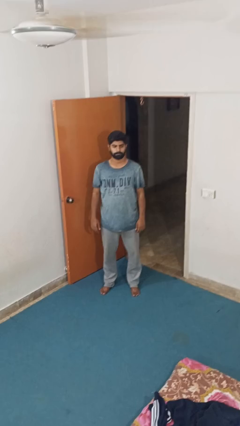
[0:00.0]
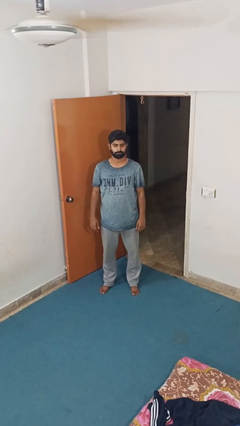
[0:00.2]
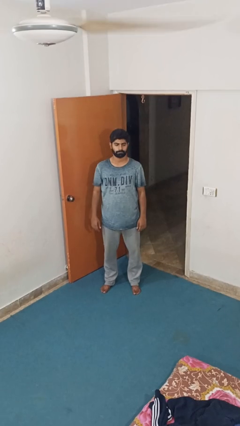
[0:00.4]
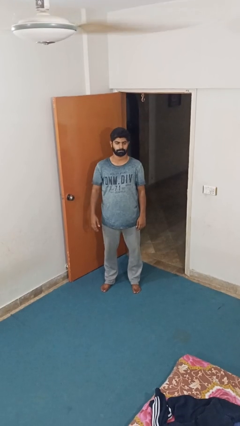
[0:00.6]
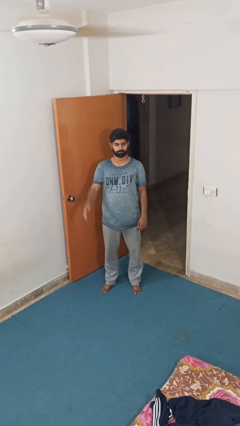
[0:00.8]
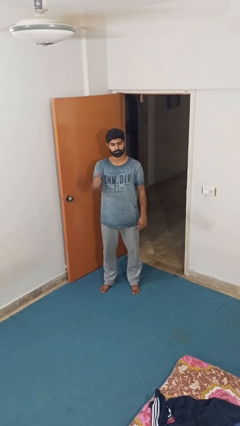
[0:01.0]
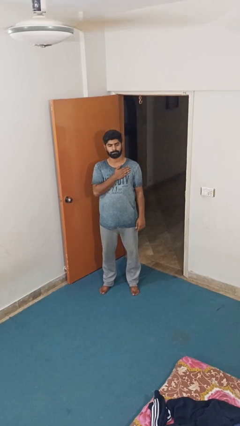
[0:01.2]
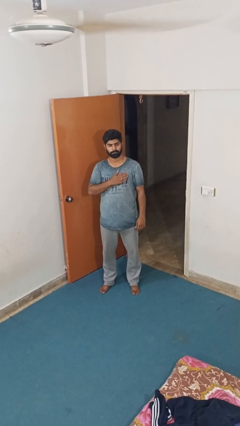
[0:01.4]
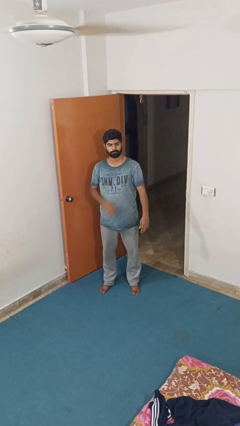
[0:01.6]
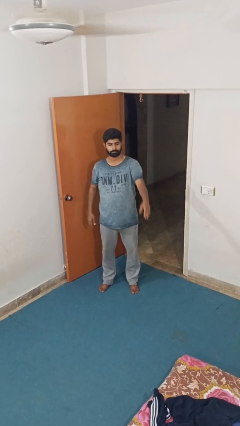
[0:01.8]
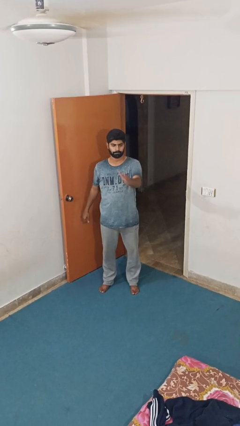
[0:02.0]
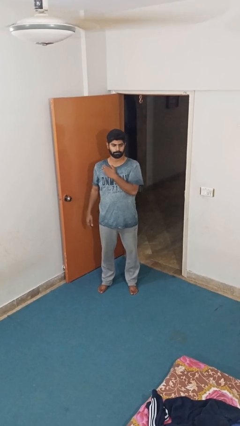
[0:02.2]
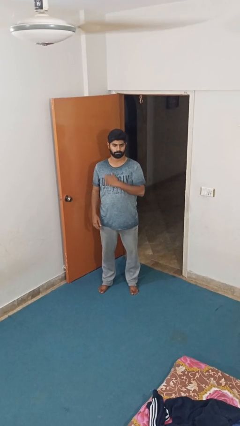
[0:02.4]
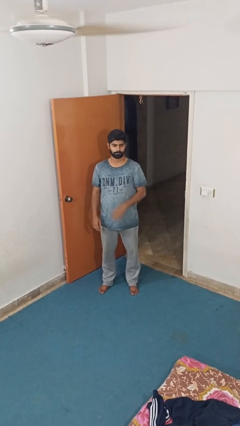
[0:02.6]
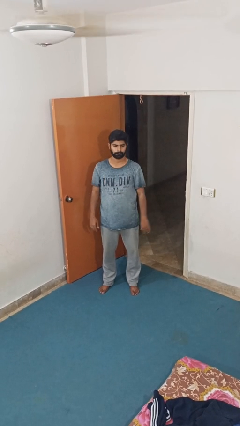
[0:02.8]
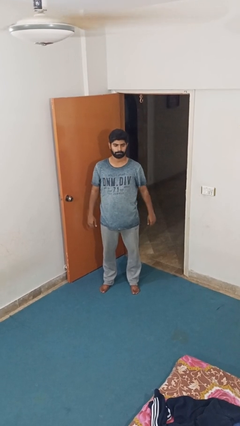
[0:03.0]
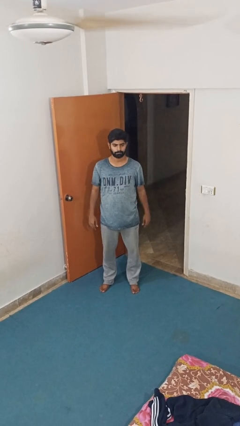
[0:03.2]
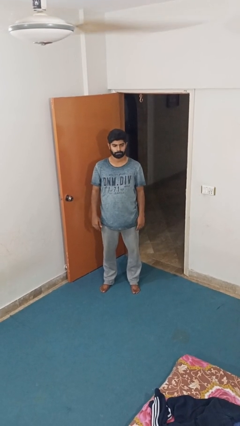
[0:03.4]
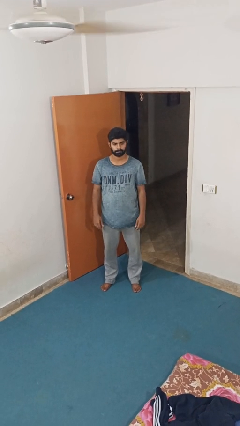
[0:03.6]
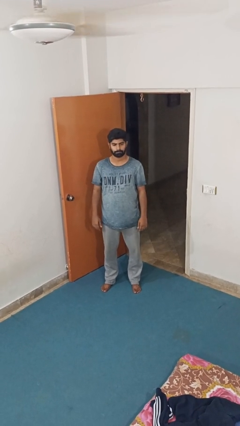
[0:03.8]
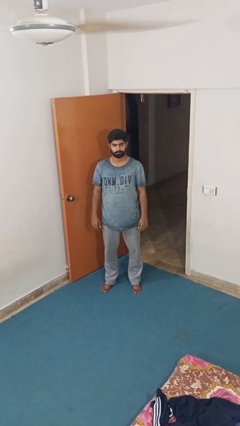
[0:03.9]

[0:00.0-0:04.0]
person drums on chest

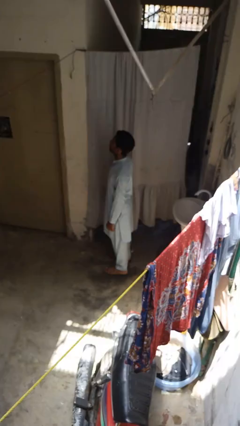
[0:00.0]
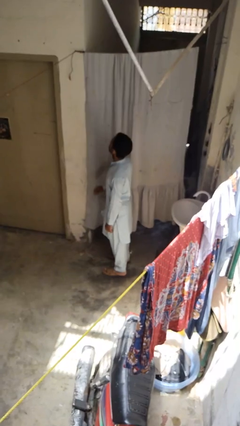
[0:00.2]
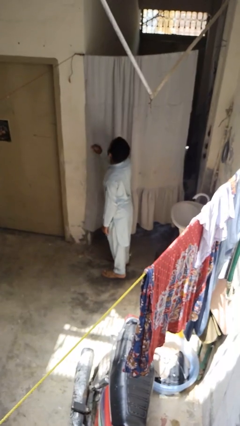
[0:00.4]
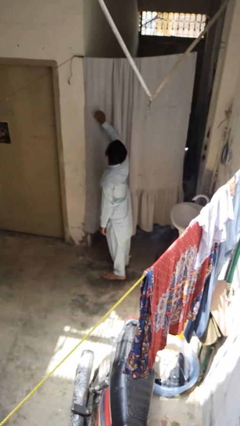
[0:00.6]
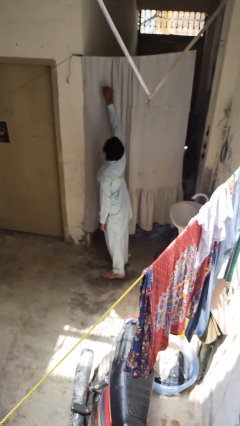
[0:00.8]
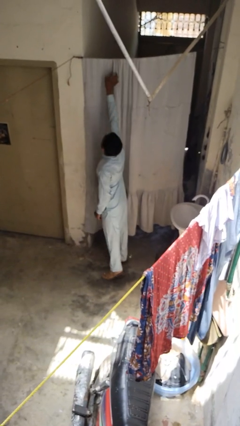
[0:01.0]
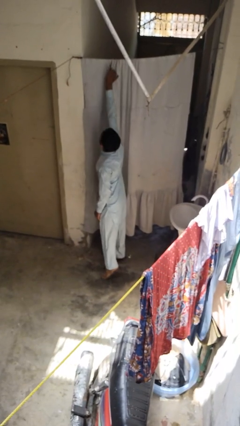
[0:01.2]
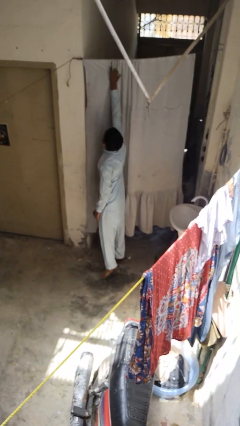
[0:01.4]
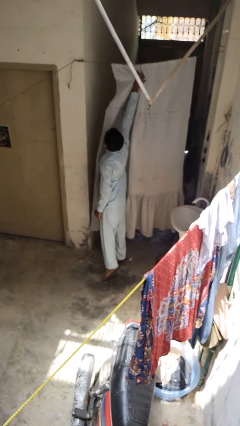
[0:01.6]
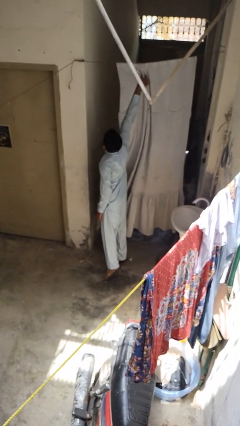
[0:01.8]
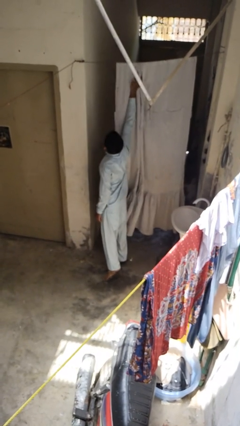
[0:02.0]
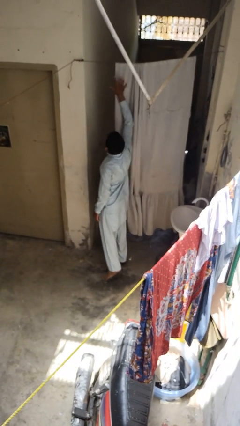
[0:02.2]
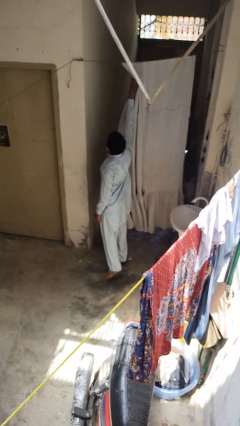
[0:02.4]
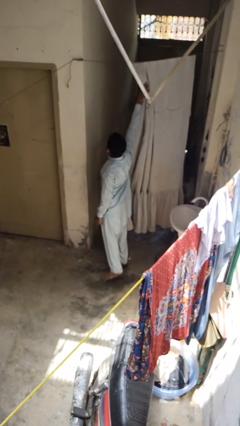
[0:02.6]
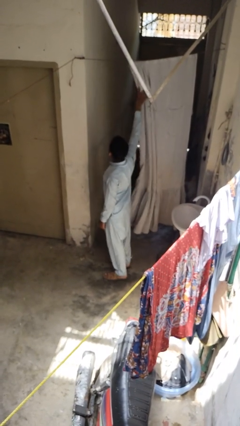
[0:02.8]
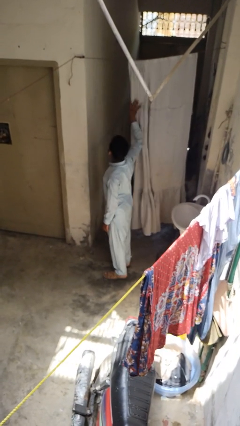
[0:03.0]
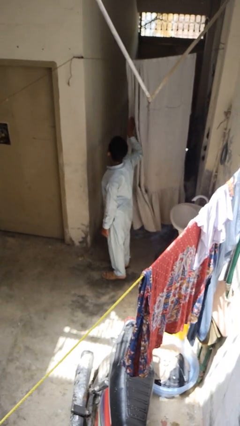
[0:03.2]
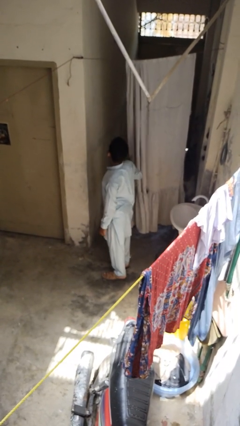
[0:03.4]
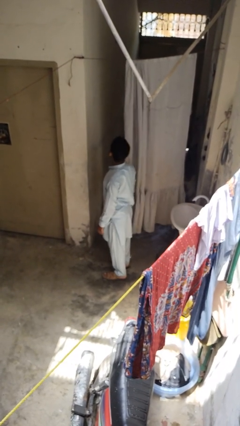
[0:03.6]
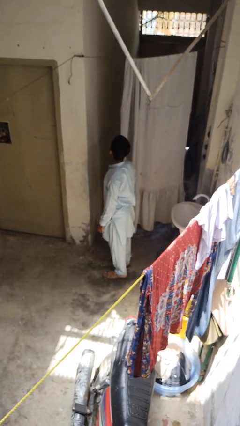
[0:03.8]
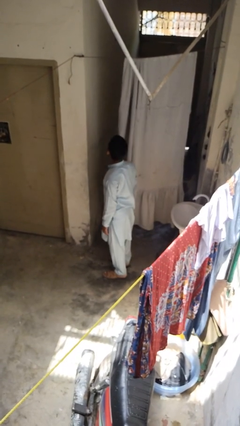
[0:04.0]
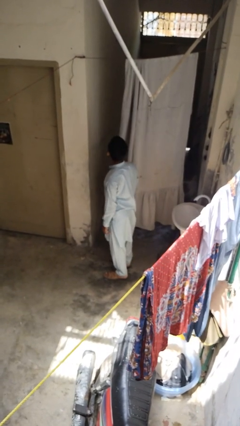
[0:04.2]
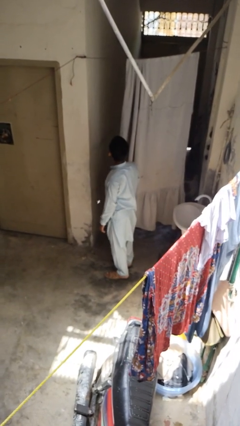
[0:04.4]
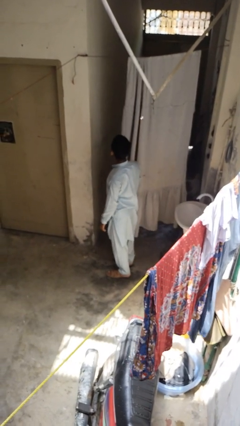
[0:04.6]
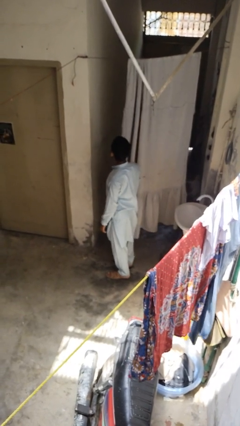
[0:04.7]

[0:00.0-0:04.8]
person opens curtains

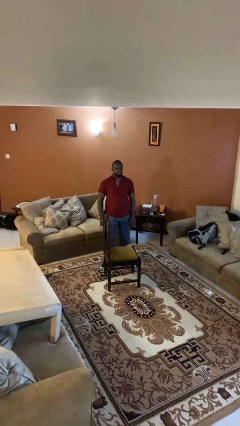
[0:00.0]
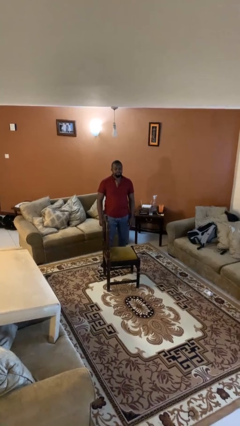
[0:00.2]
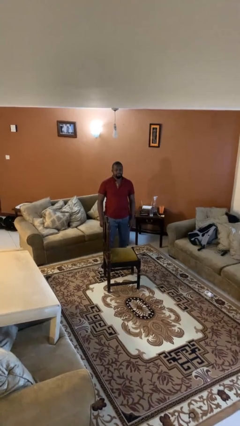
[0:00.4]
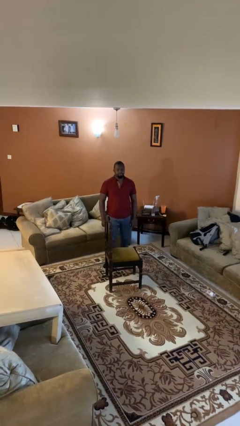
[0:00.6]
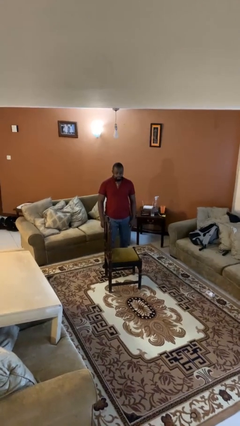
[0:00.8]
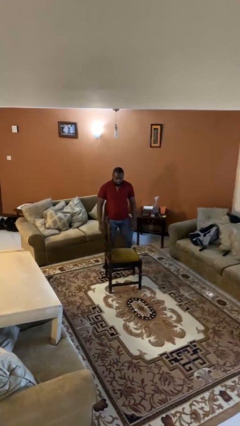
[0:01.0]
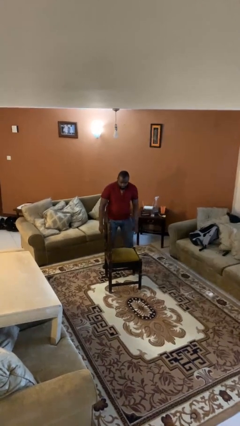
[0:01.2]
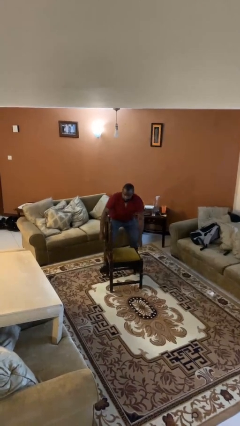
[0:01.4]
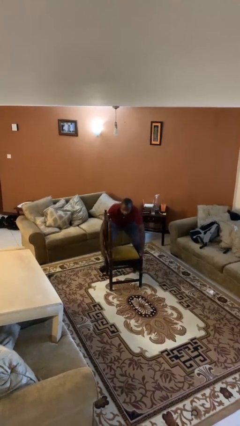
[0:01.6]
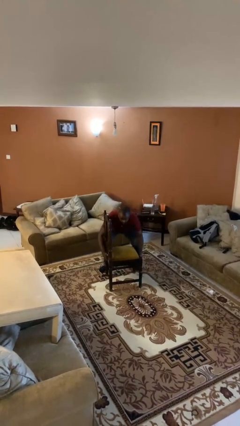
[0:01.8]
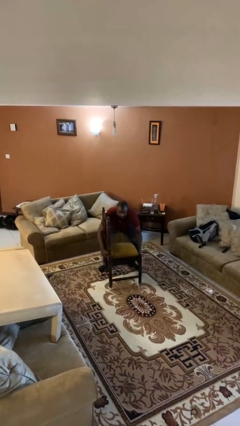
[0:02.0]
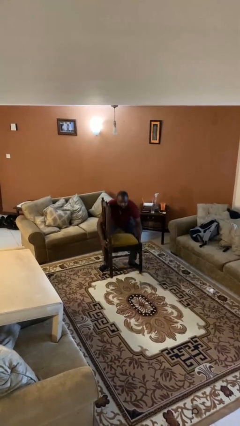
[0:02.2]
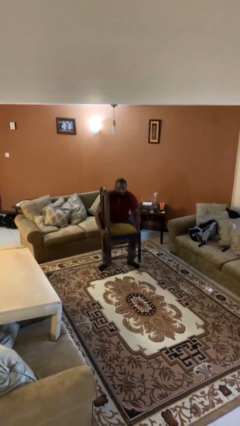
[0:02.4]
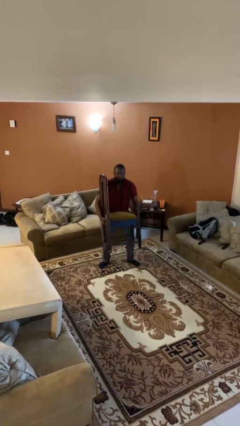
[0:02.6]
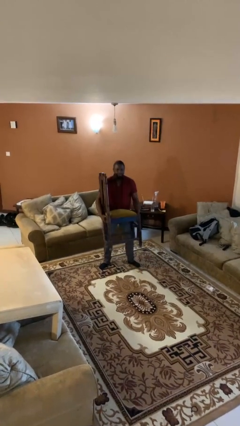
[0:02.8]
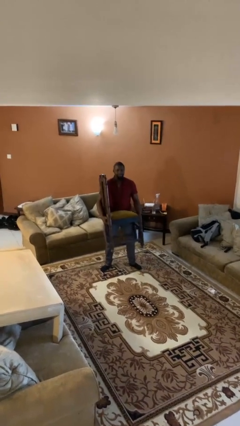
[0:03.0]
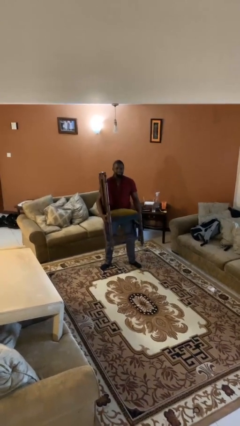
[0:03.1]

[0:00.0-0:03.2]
person picks up object from floor

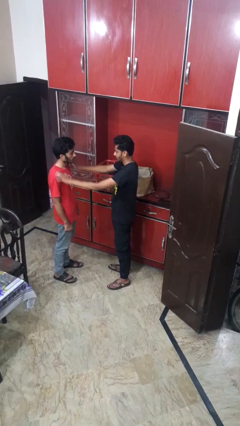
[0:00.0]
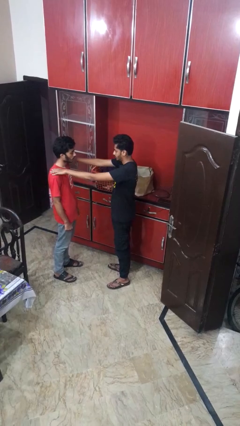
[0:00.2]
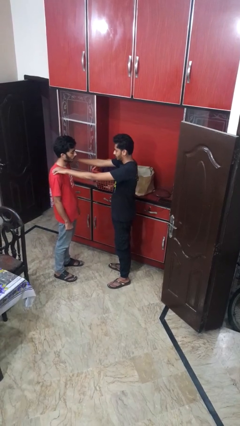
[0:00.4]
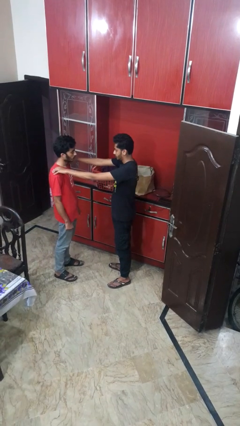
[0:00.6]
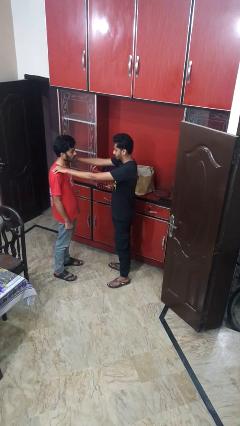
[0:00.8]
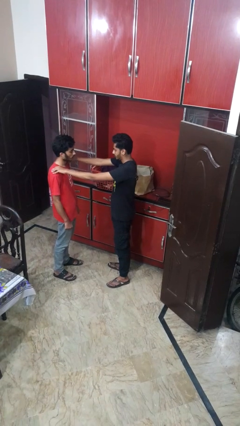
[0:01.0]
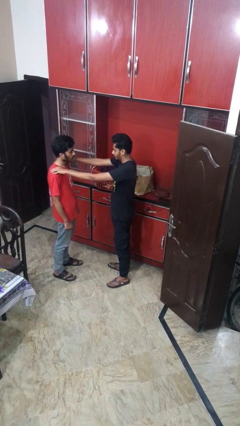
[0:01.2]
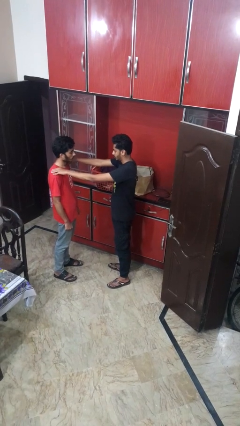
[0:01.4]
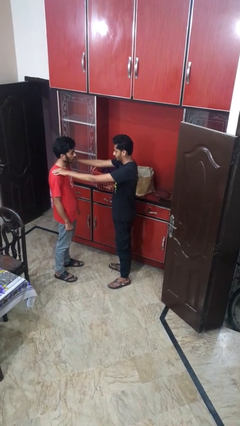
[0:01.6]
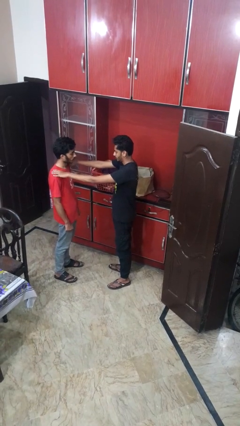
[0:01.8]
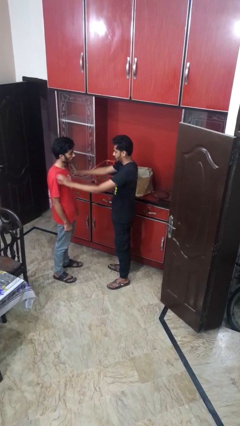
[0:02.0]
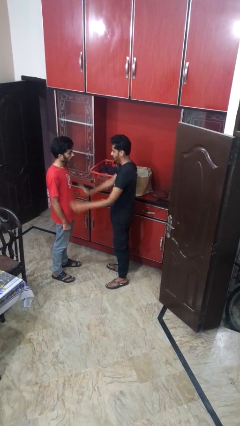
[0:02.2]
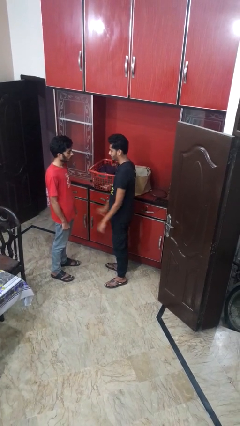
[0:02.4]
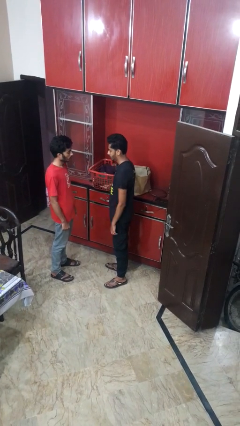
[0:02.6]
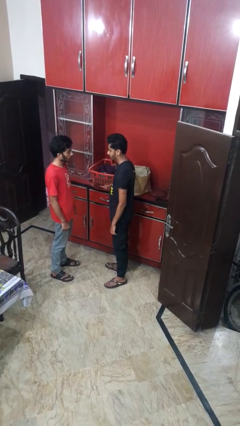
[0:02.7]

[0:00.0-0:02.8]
person pounds shoulders of person

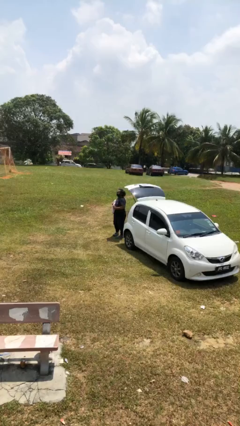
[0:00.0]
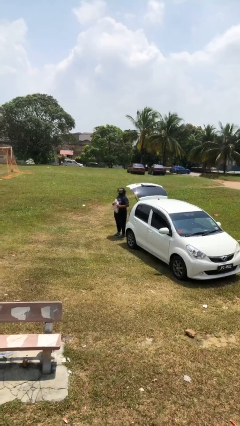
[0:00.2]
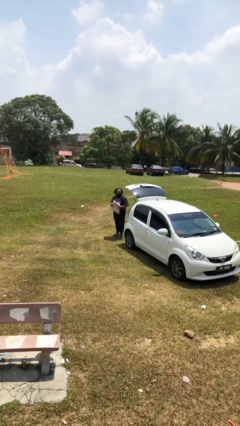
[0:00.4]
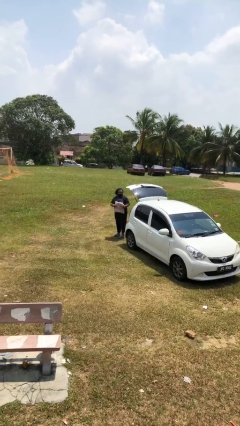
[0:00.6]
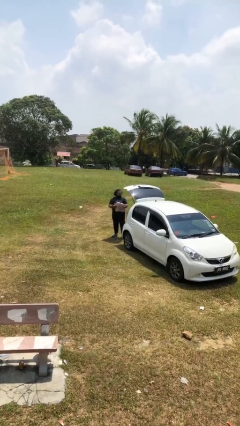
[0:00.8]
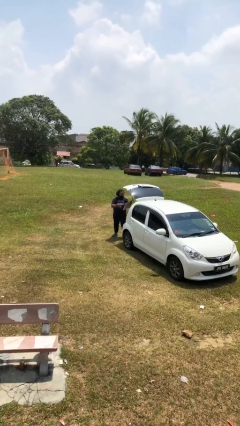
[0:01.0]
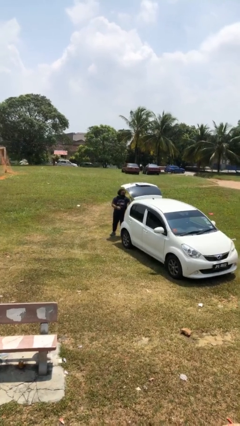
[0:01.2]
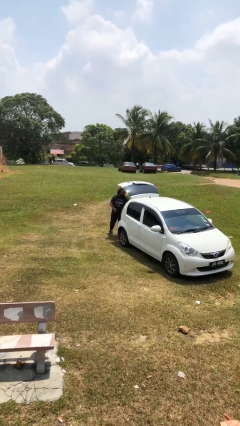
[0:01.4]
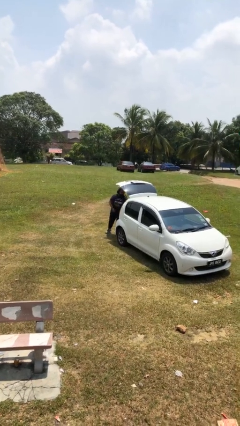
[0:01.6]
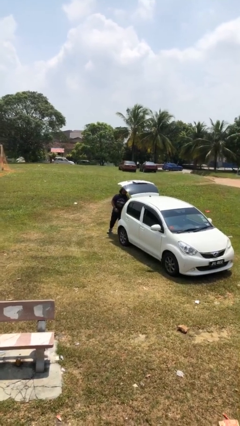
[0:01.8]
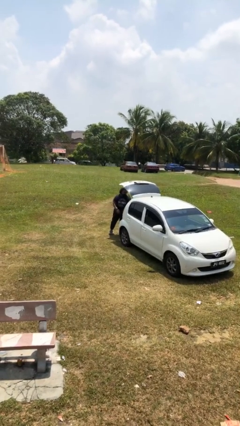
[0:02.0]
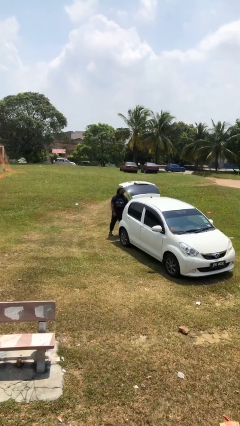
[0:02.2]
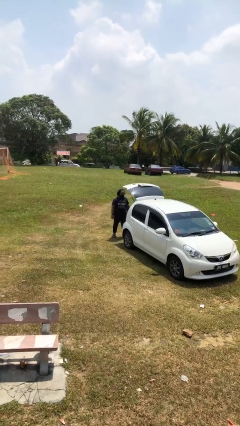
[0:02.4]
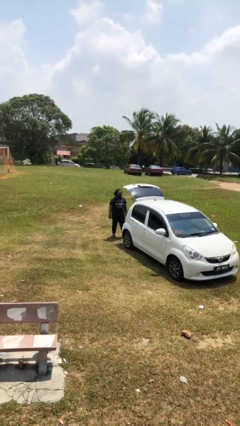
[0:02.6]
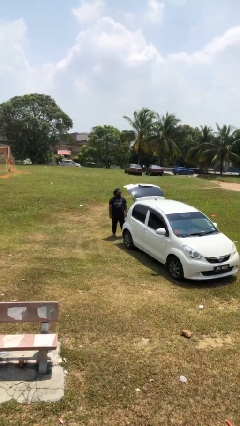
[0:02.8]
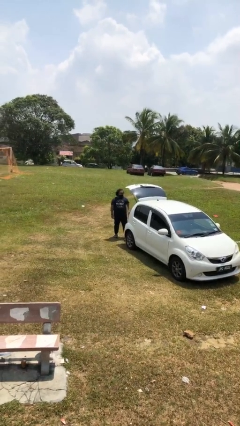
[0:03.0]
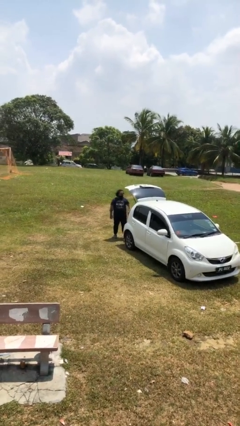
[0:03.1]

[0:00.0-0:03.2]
person loads car
